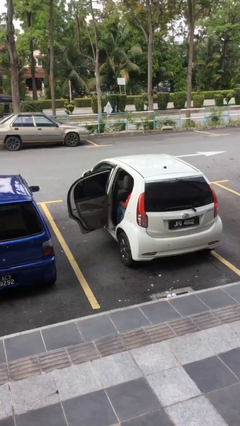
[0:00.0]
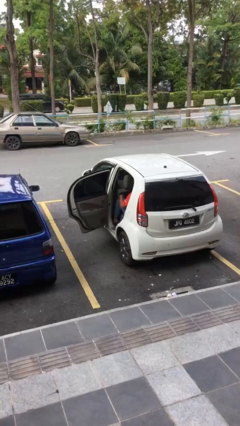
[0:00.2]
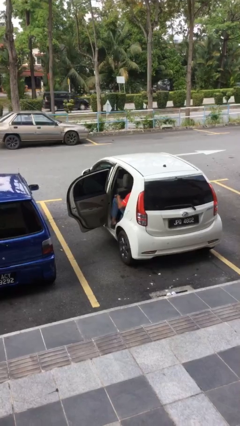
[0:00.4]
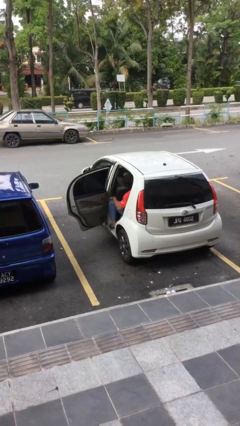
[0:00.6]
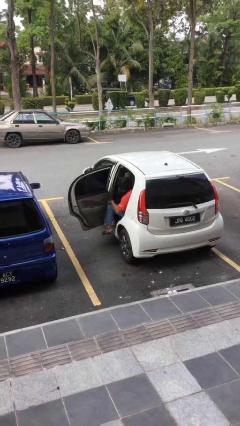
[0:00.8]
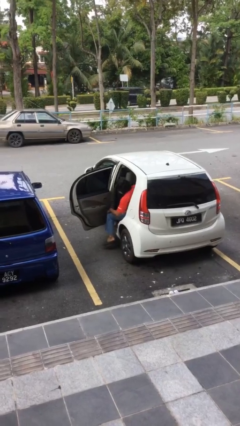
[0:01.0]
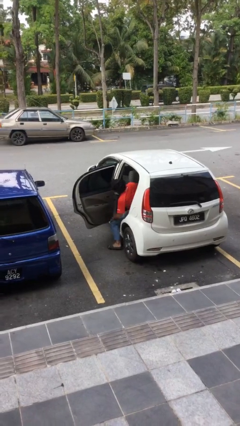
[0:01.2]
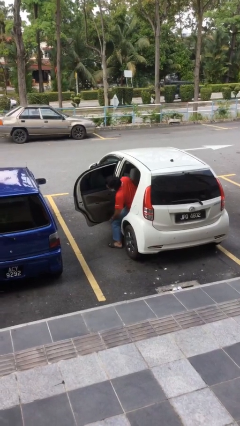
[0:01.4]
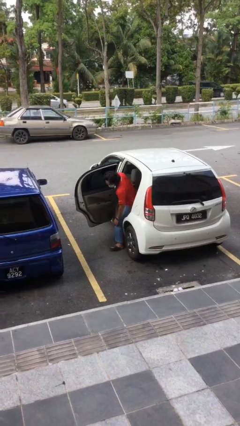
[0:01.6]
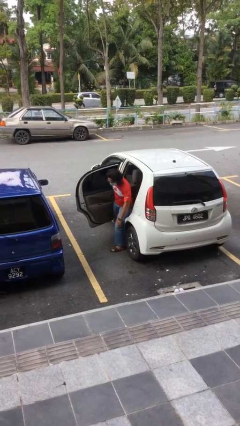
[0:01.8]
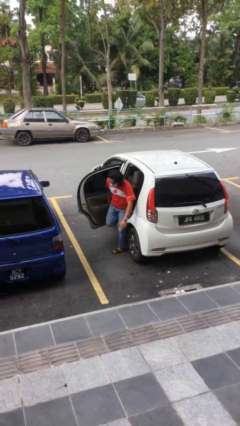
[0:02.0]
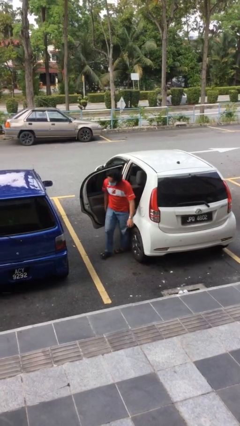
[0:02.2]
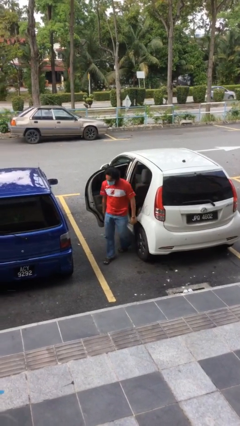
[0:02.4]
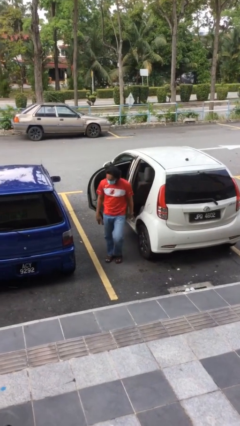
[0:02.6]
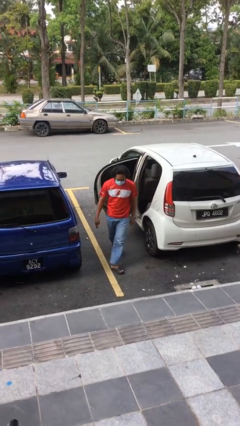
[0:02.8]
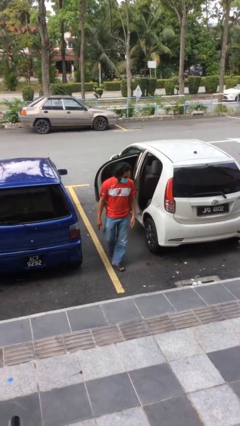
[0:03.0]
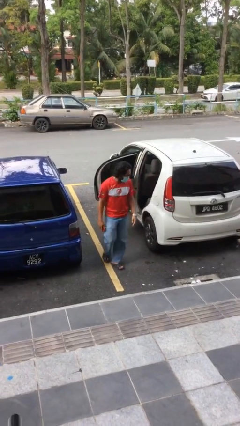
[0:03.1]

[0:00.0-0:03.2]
person exits car

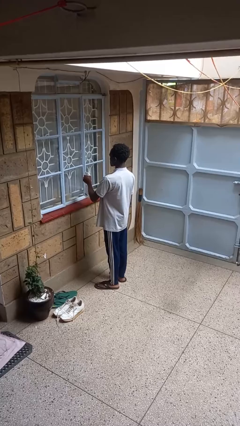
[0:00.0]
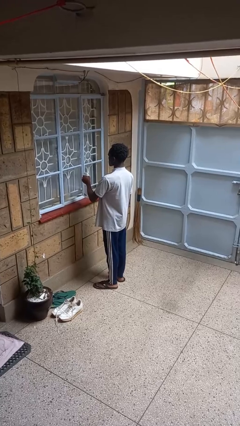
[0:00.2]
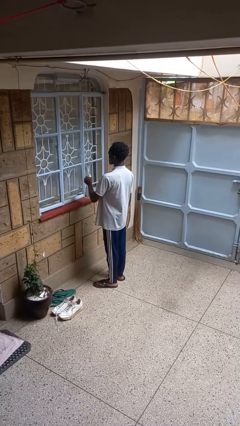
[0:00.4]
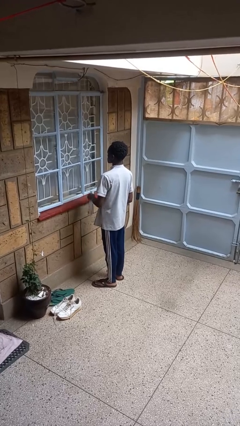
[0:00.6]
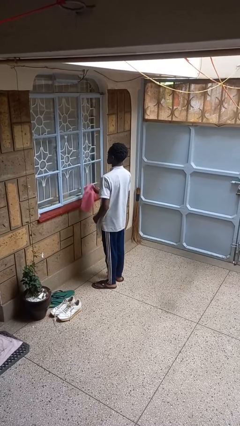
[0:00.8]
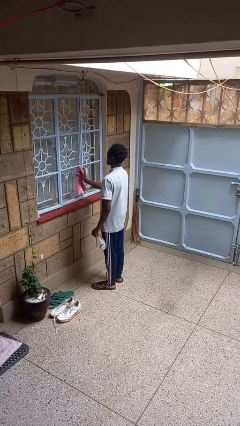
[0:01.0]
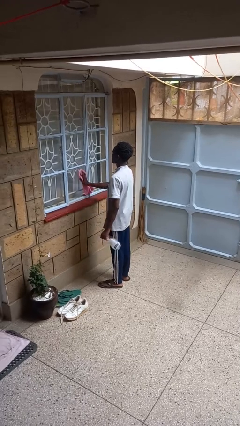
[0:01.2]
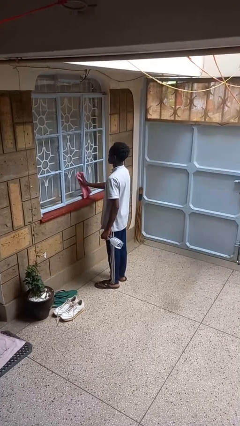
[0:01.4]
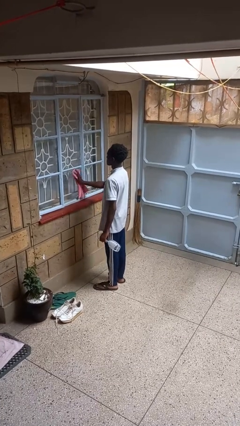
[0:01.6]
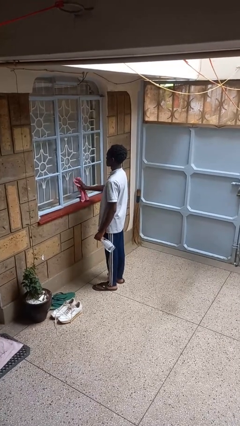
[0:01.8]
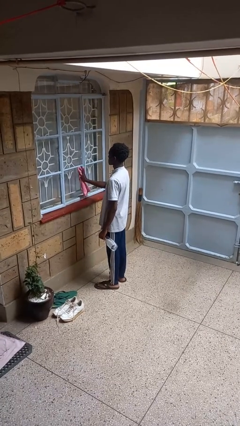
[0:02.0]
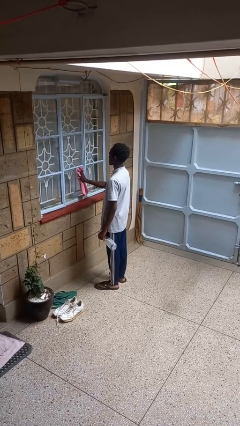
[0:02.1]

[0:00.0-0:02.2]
person washes window

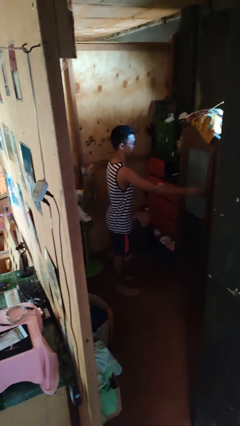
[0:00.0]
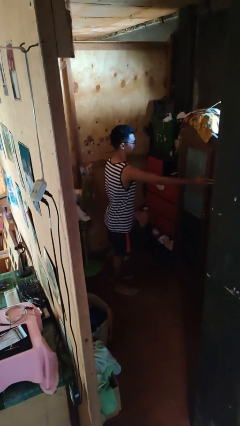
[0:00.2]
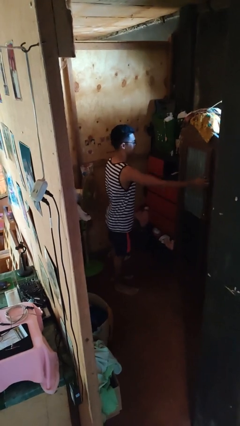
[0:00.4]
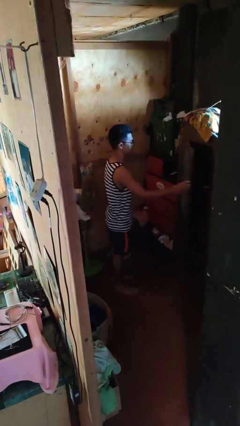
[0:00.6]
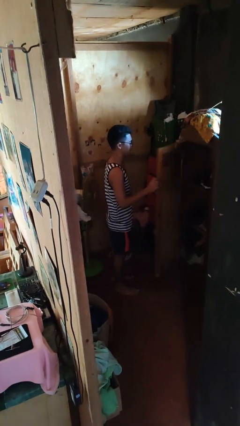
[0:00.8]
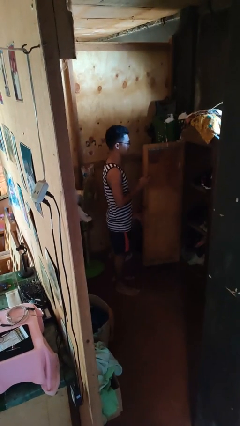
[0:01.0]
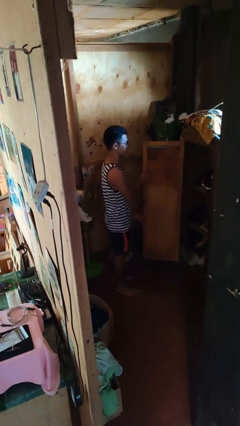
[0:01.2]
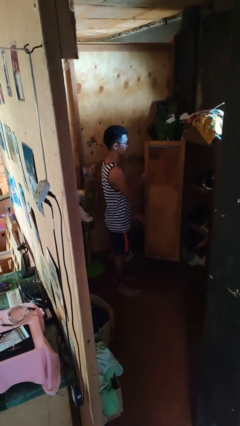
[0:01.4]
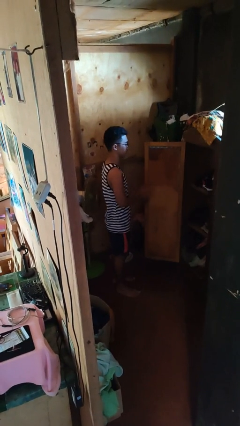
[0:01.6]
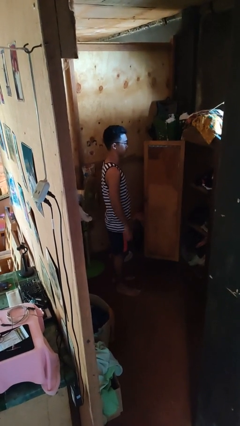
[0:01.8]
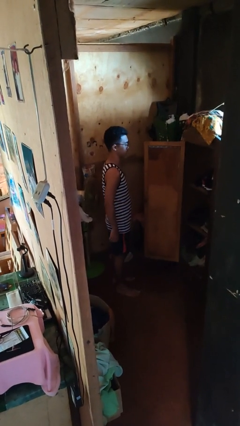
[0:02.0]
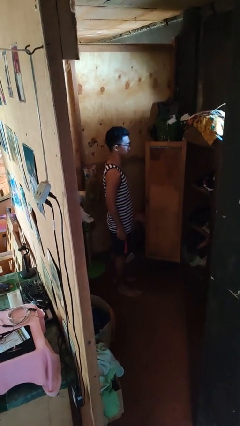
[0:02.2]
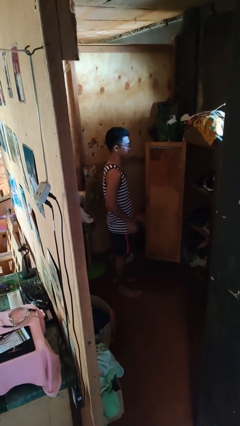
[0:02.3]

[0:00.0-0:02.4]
person opens closet door

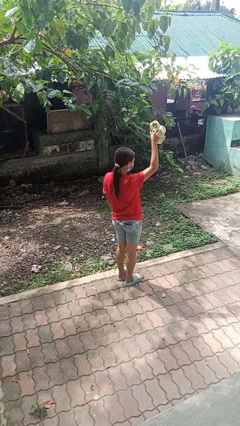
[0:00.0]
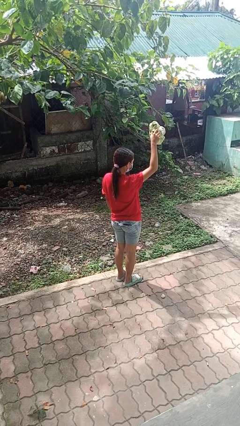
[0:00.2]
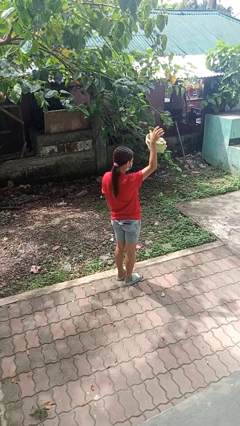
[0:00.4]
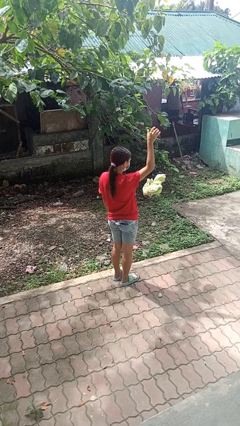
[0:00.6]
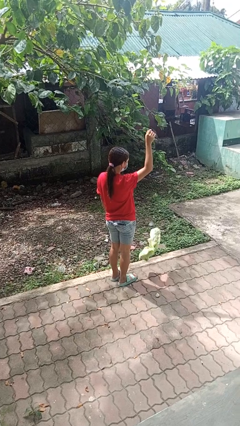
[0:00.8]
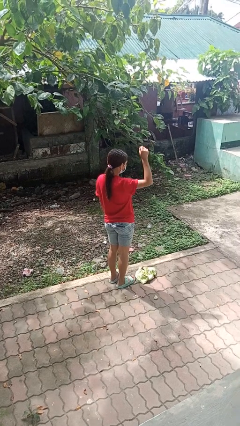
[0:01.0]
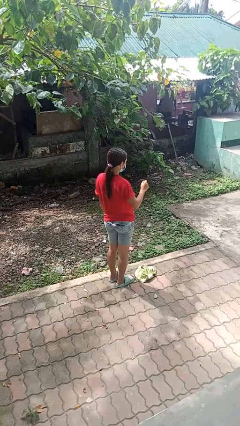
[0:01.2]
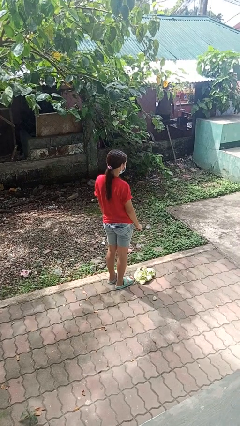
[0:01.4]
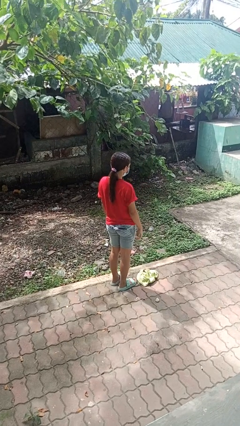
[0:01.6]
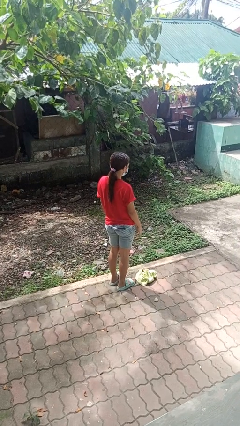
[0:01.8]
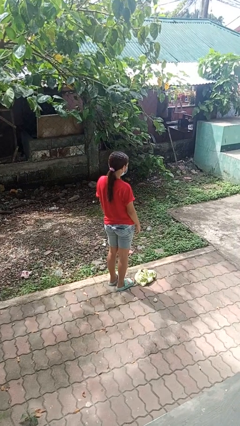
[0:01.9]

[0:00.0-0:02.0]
person drops object

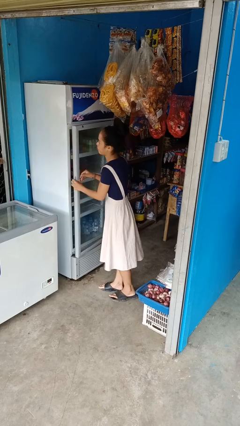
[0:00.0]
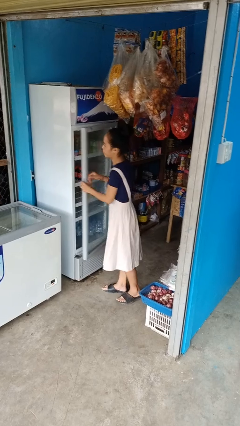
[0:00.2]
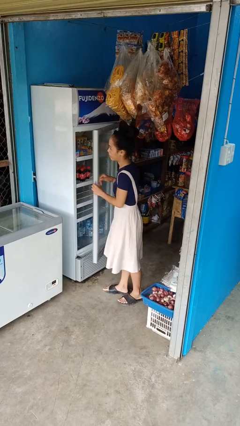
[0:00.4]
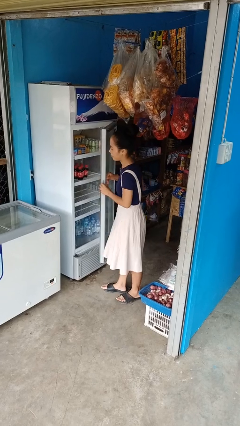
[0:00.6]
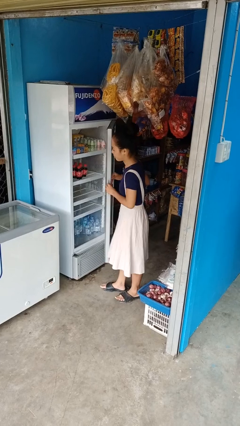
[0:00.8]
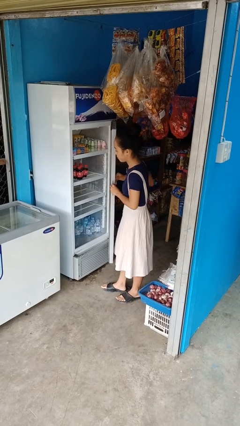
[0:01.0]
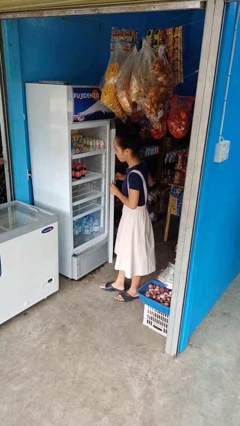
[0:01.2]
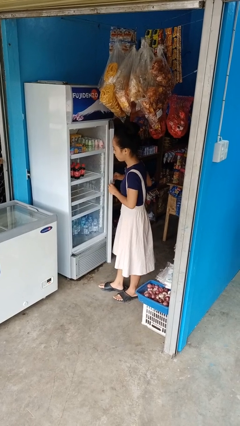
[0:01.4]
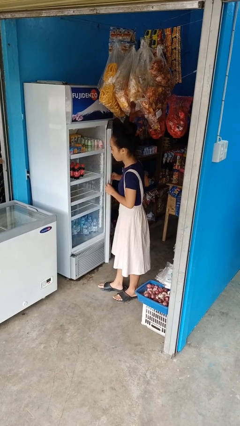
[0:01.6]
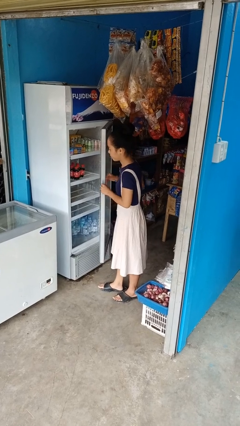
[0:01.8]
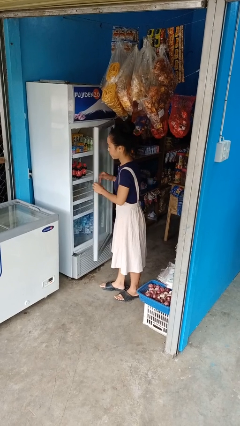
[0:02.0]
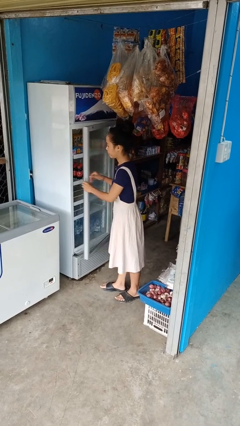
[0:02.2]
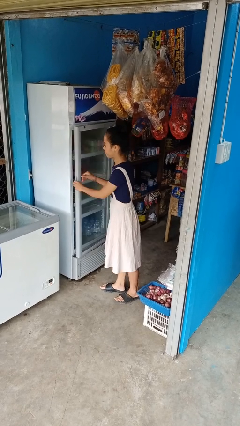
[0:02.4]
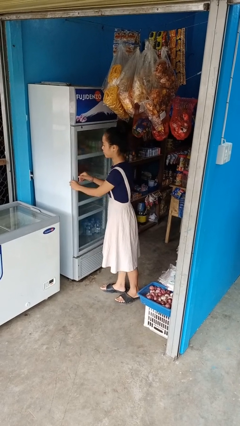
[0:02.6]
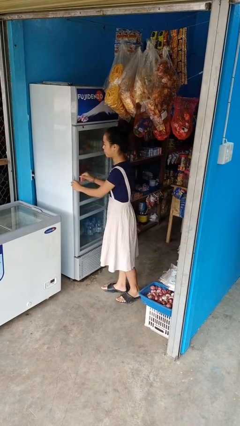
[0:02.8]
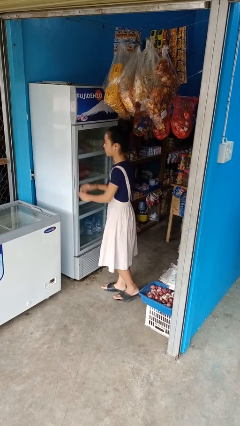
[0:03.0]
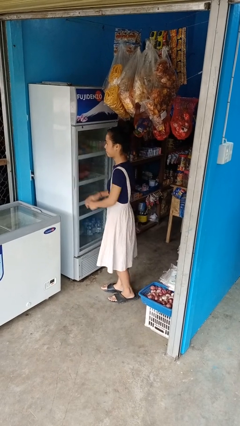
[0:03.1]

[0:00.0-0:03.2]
person opens refrigerator

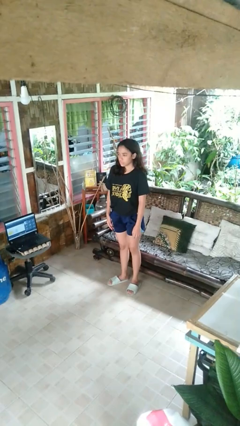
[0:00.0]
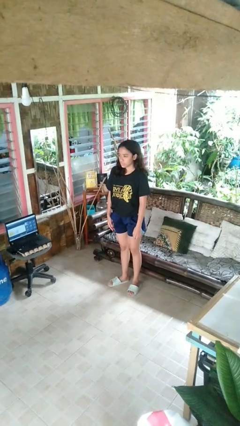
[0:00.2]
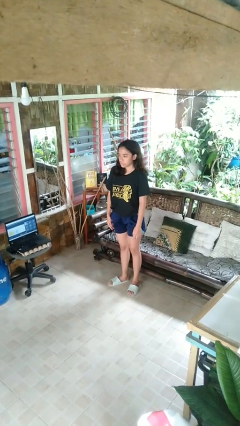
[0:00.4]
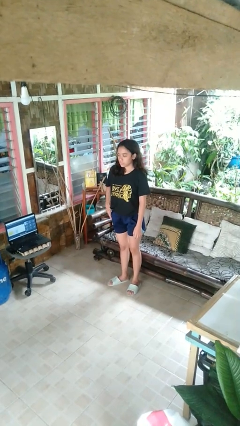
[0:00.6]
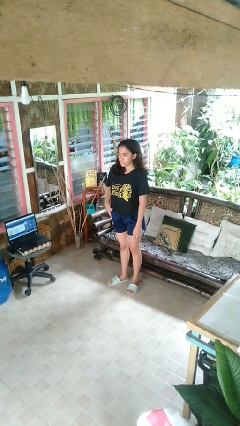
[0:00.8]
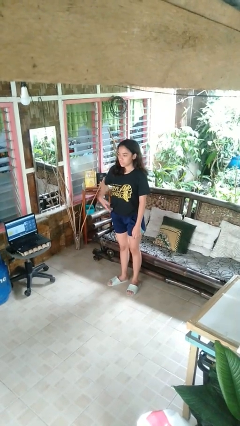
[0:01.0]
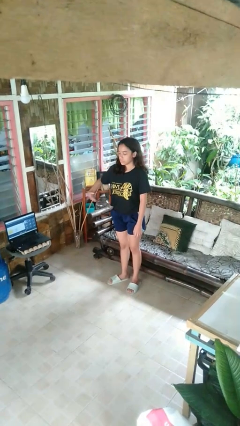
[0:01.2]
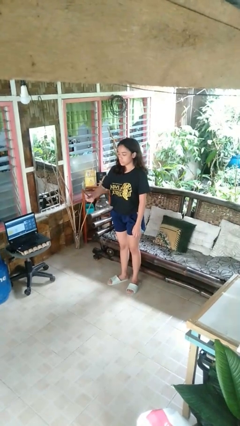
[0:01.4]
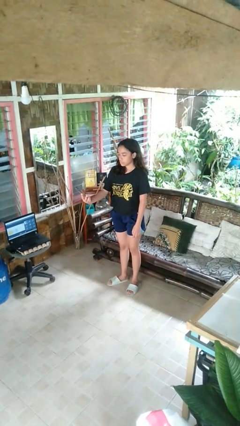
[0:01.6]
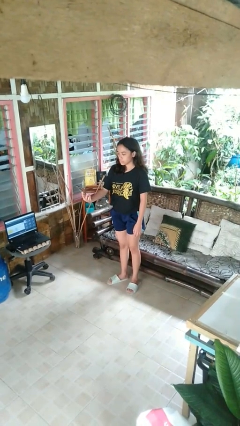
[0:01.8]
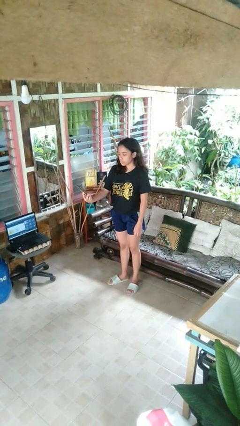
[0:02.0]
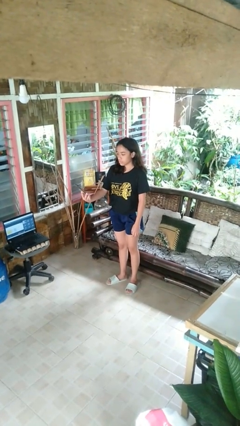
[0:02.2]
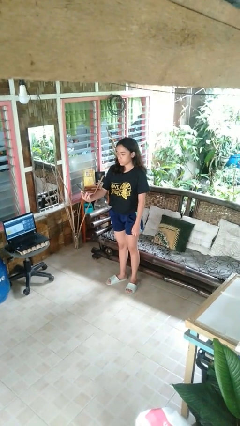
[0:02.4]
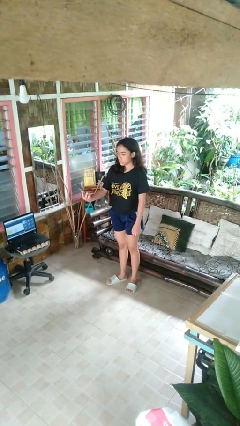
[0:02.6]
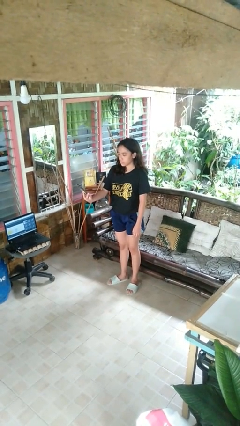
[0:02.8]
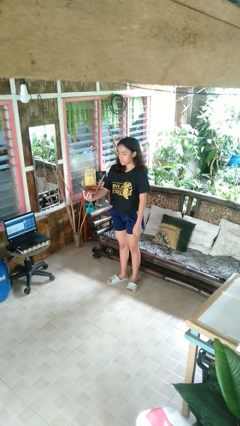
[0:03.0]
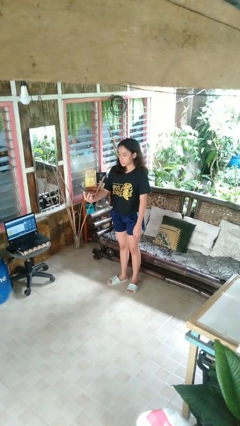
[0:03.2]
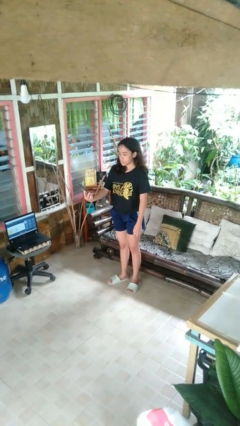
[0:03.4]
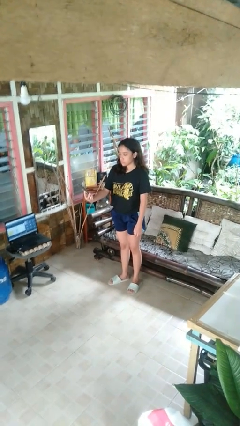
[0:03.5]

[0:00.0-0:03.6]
person takes phone from pocket

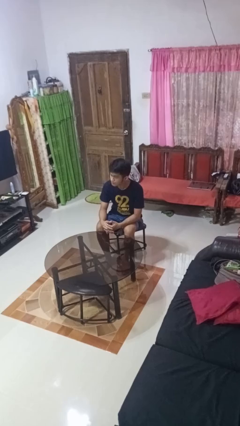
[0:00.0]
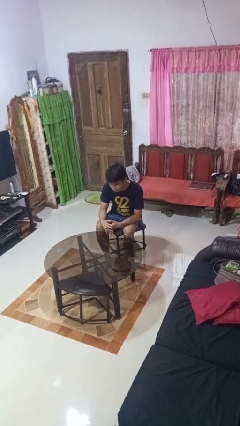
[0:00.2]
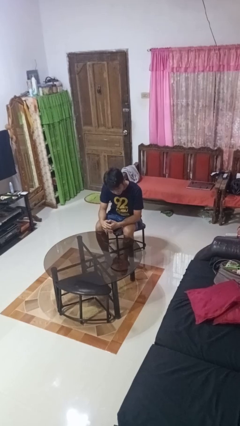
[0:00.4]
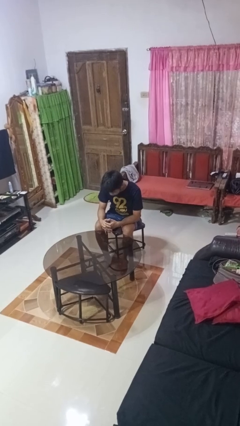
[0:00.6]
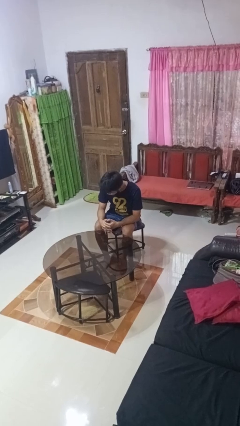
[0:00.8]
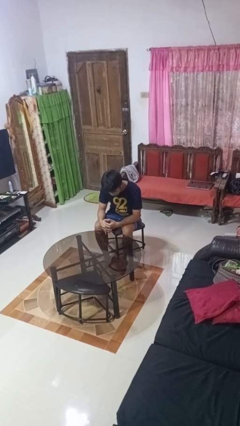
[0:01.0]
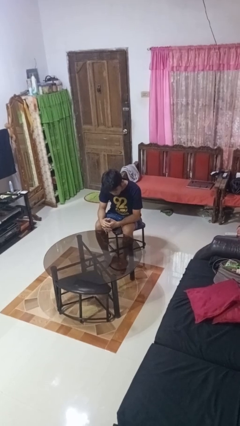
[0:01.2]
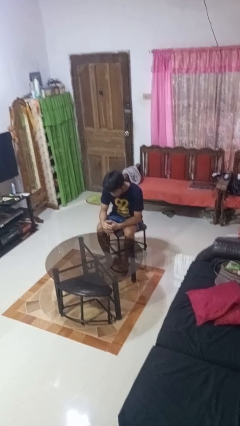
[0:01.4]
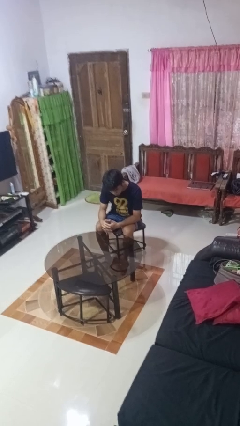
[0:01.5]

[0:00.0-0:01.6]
person shakes head
